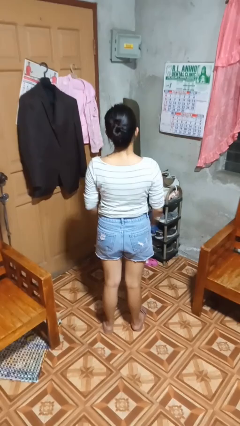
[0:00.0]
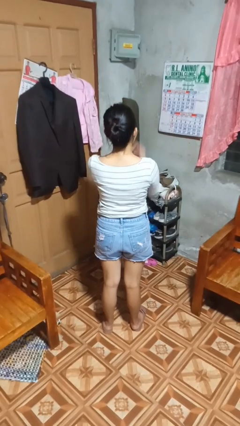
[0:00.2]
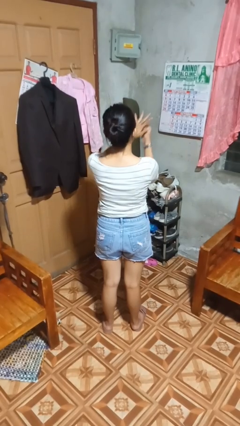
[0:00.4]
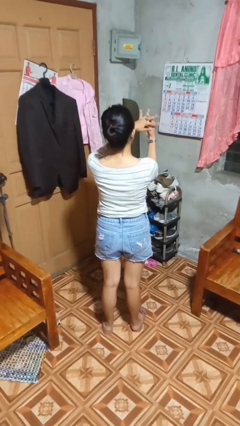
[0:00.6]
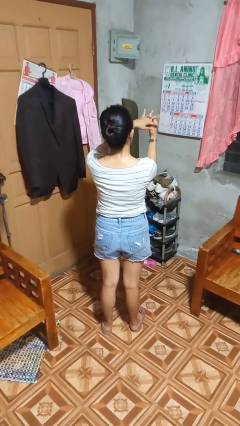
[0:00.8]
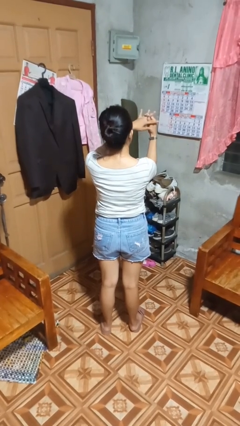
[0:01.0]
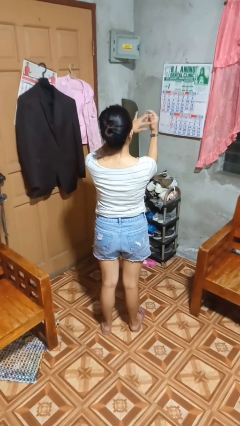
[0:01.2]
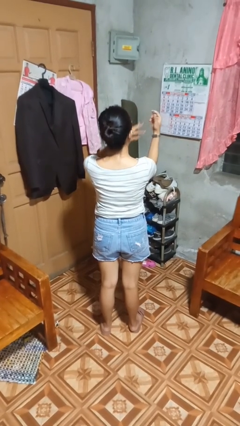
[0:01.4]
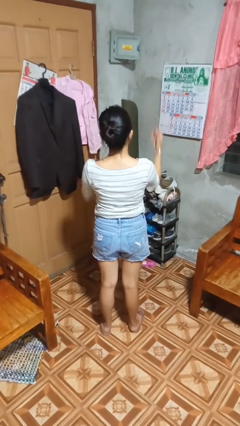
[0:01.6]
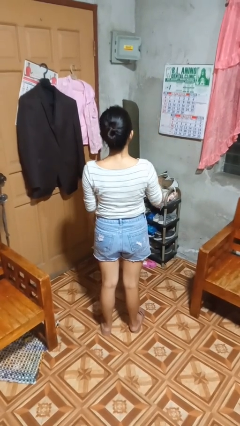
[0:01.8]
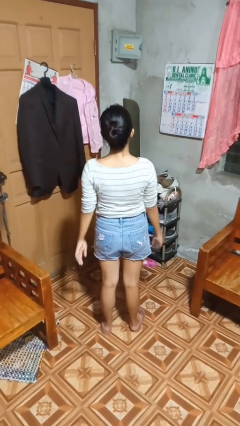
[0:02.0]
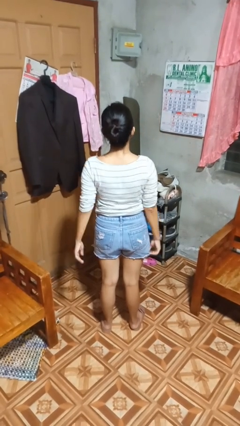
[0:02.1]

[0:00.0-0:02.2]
person takes off ring

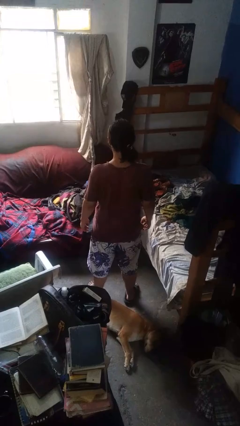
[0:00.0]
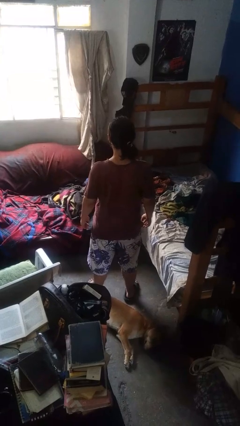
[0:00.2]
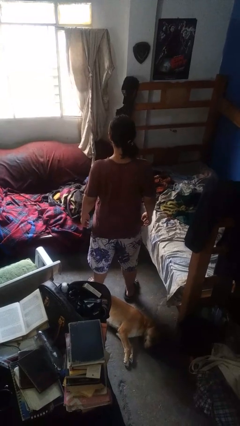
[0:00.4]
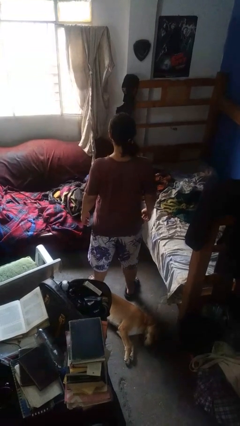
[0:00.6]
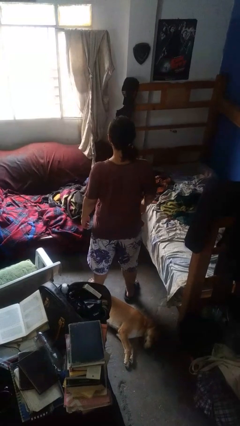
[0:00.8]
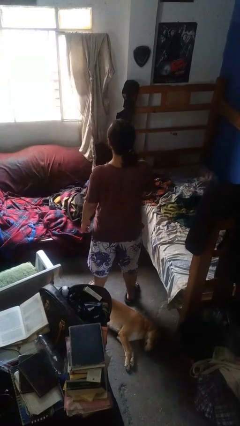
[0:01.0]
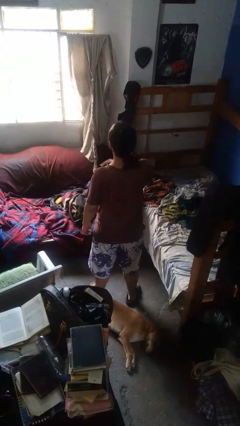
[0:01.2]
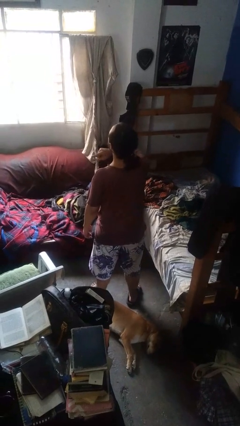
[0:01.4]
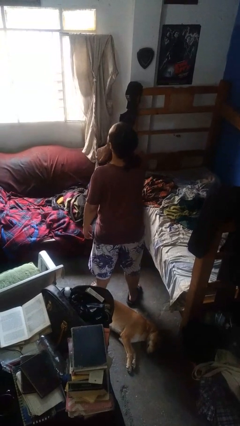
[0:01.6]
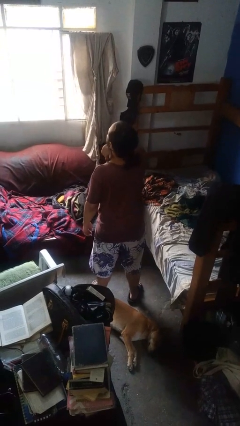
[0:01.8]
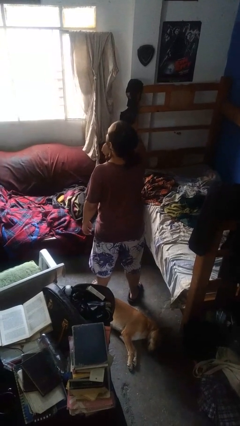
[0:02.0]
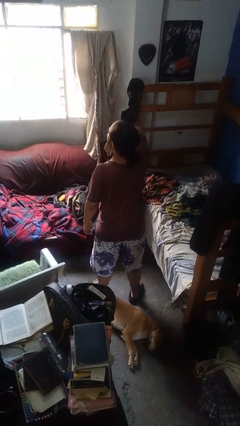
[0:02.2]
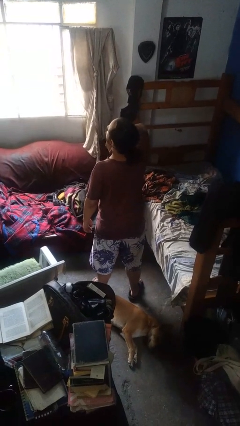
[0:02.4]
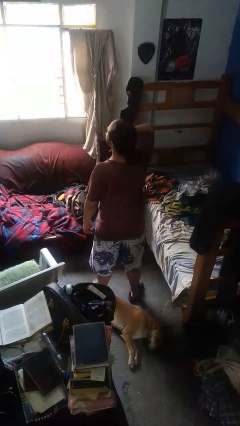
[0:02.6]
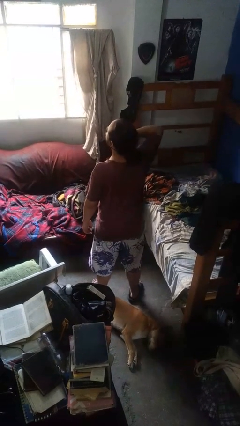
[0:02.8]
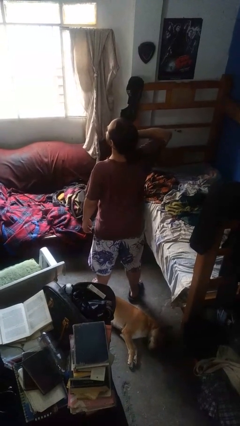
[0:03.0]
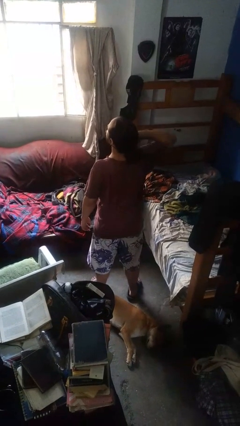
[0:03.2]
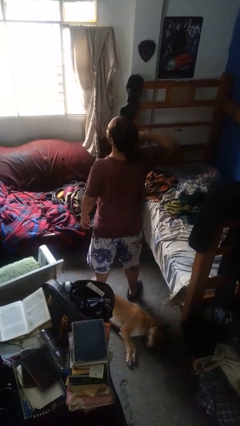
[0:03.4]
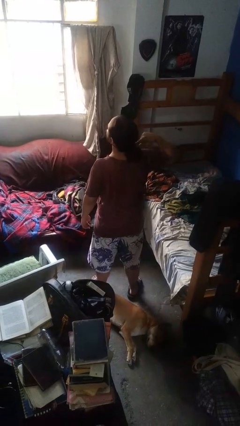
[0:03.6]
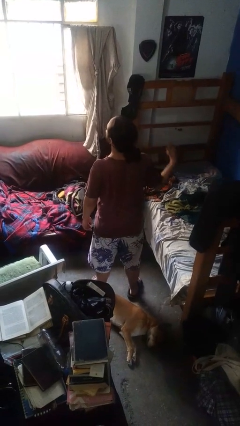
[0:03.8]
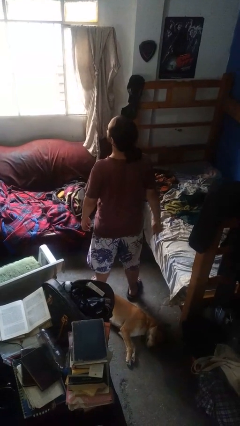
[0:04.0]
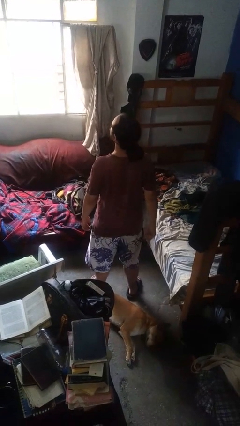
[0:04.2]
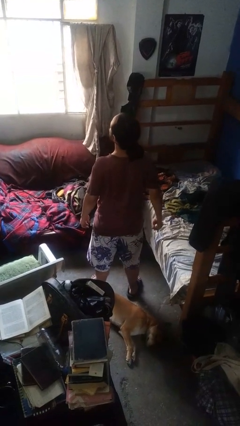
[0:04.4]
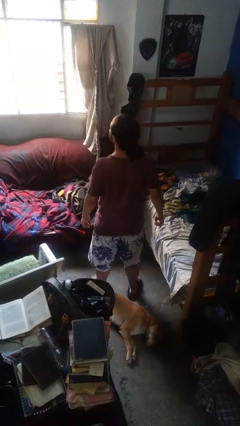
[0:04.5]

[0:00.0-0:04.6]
person gestures watch closely

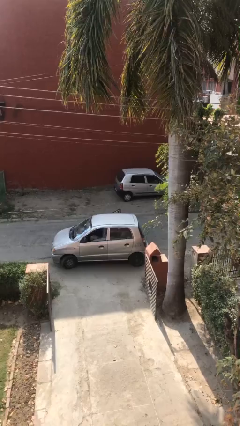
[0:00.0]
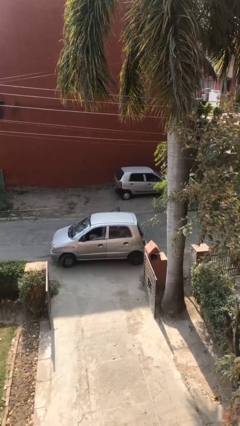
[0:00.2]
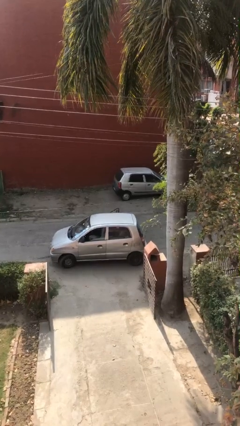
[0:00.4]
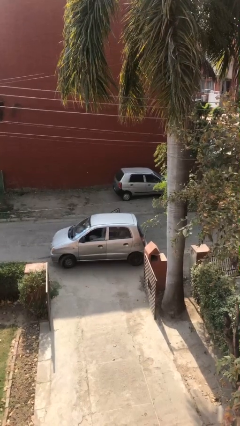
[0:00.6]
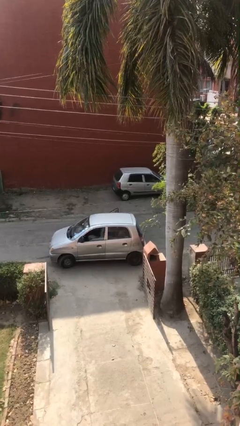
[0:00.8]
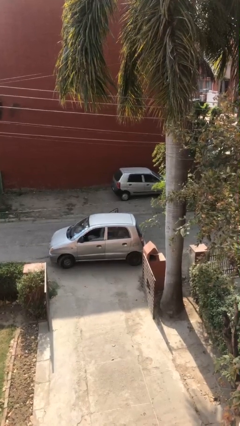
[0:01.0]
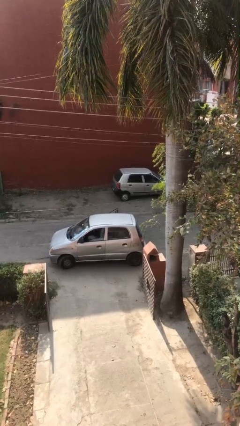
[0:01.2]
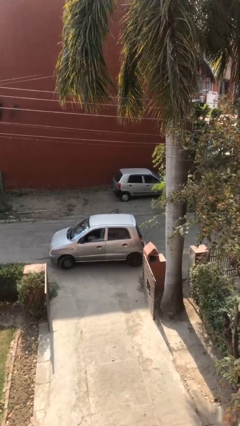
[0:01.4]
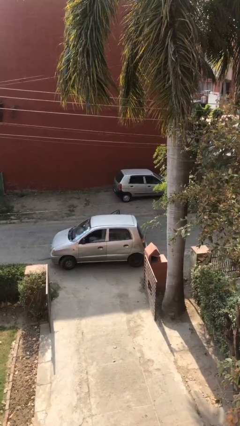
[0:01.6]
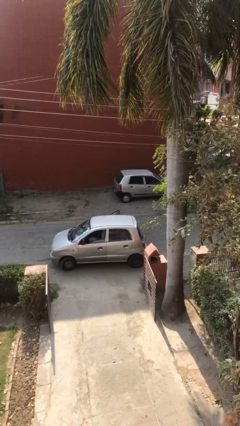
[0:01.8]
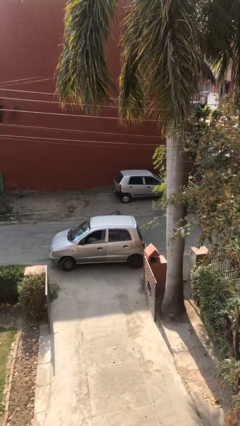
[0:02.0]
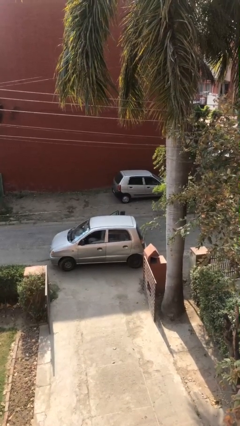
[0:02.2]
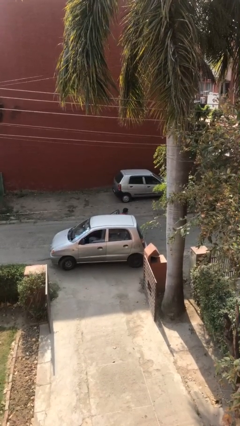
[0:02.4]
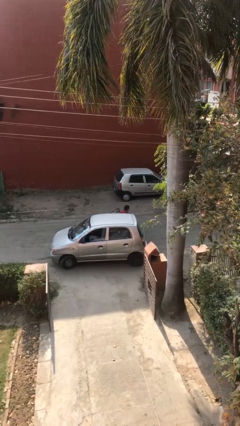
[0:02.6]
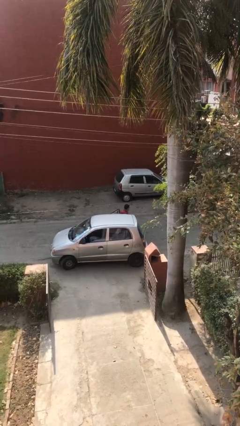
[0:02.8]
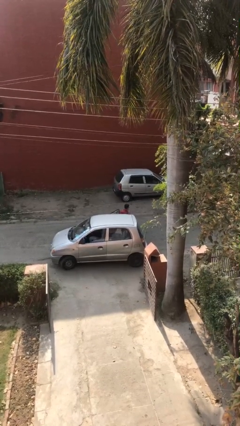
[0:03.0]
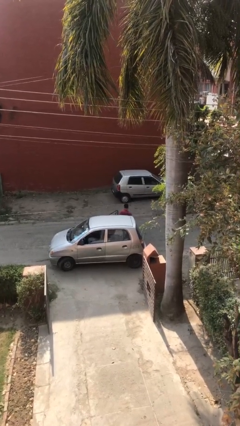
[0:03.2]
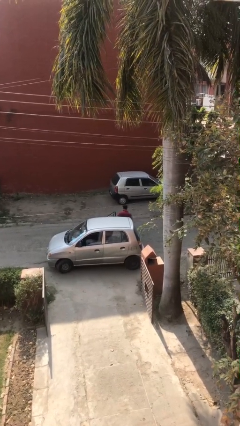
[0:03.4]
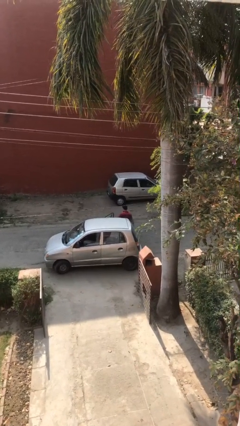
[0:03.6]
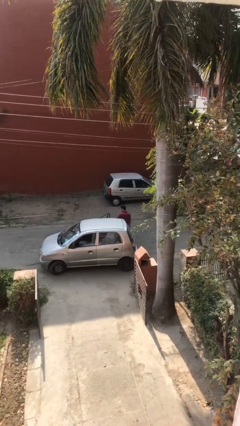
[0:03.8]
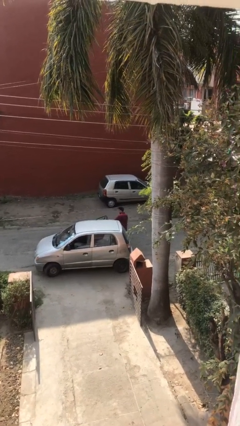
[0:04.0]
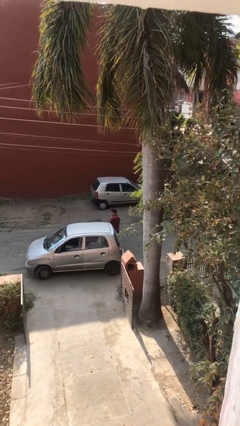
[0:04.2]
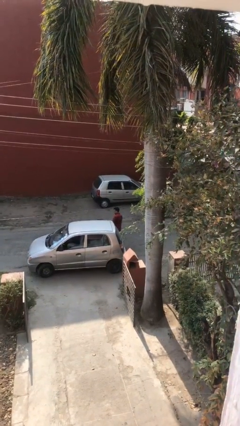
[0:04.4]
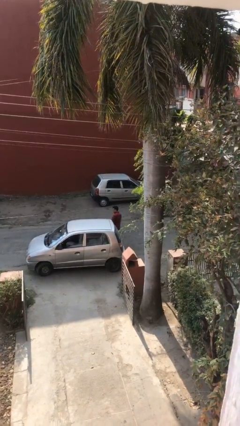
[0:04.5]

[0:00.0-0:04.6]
person exits car

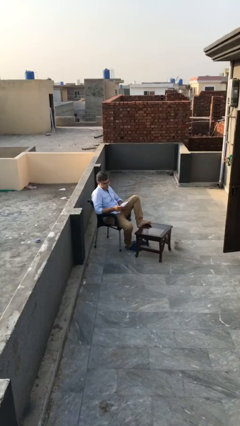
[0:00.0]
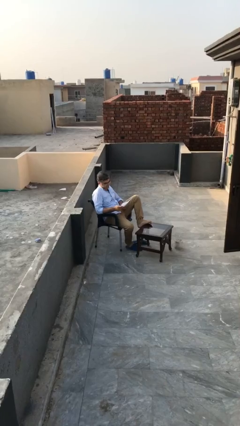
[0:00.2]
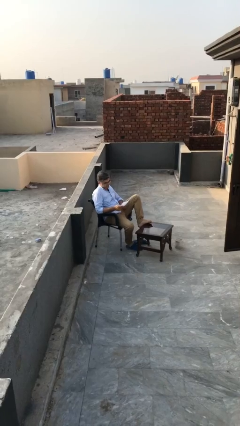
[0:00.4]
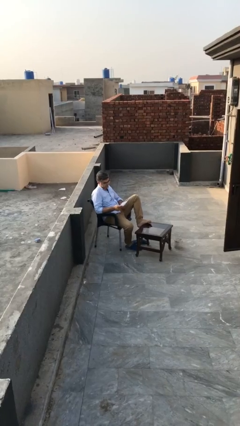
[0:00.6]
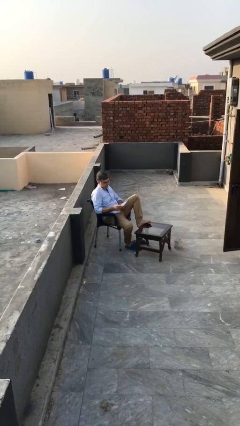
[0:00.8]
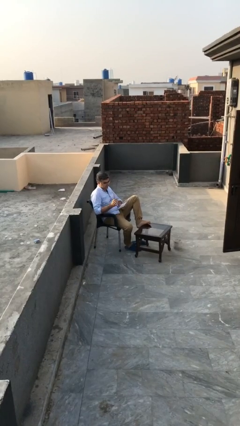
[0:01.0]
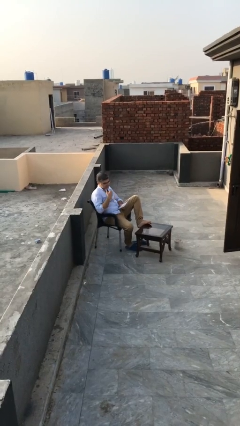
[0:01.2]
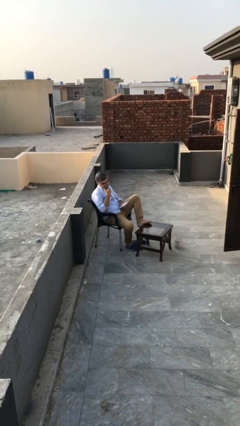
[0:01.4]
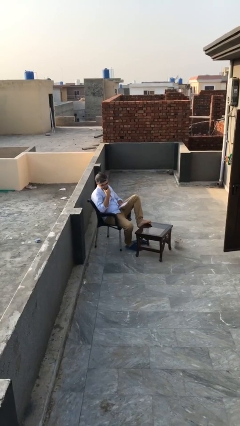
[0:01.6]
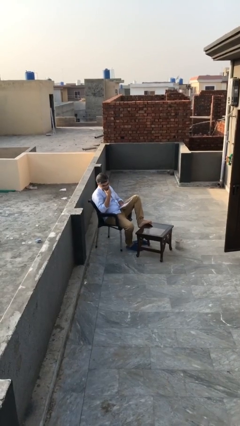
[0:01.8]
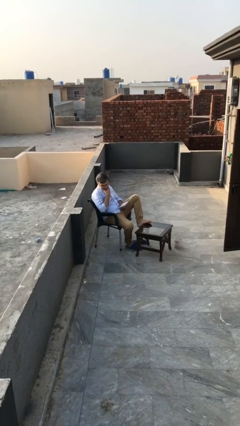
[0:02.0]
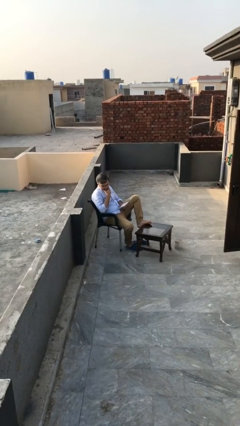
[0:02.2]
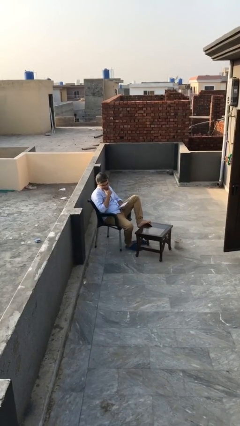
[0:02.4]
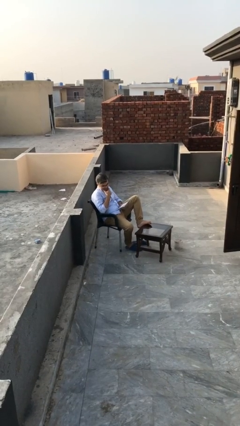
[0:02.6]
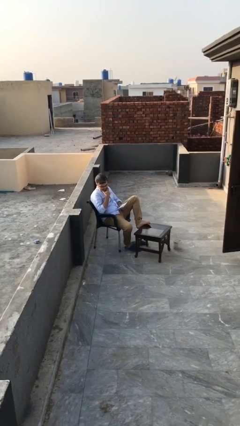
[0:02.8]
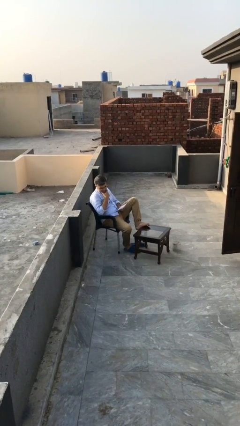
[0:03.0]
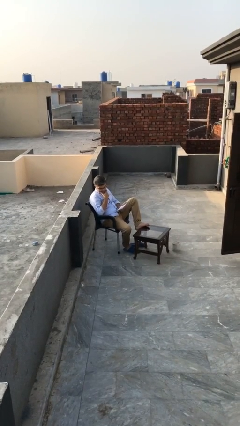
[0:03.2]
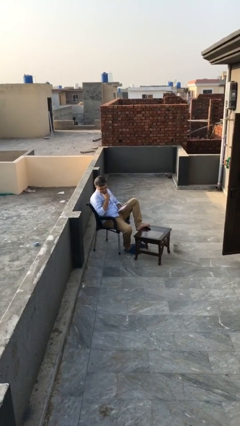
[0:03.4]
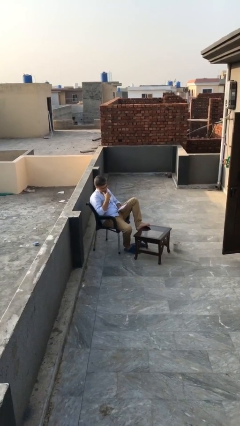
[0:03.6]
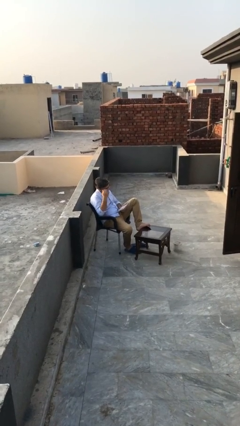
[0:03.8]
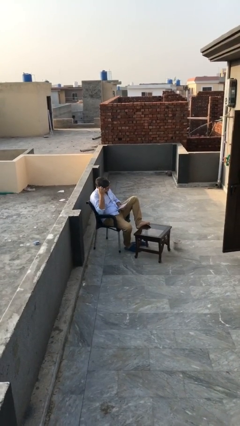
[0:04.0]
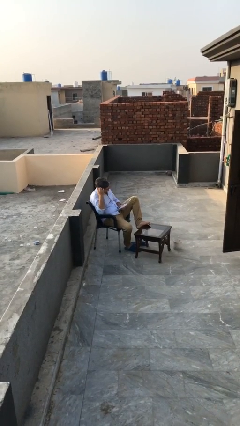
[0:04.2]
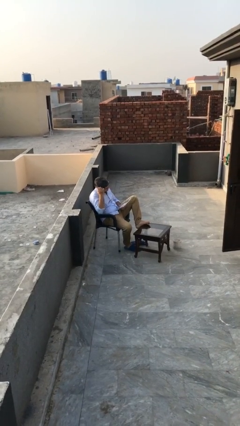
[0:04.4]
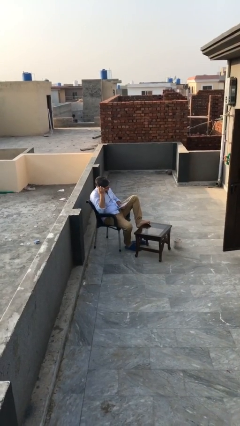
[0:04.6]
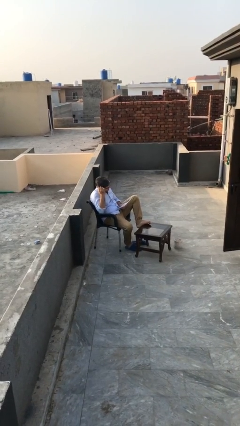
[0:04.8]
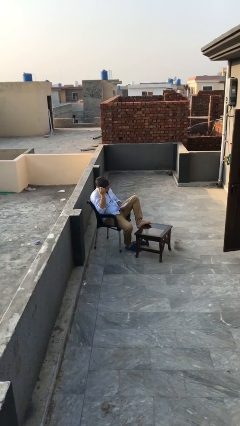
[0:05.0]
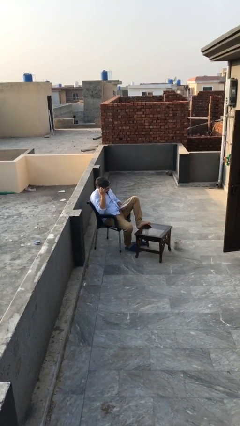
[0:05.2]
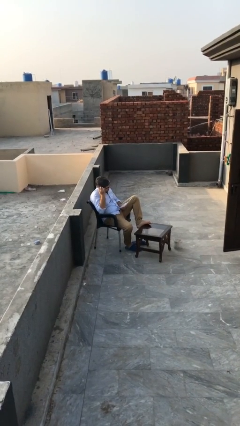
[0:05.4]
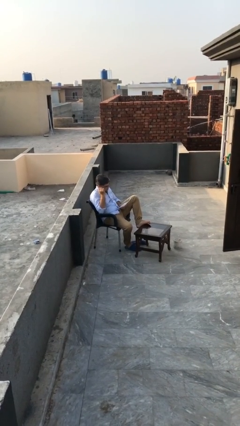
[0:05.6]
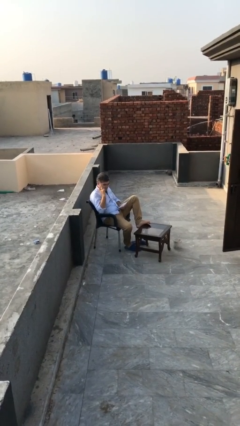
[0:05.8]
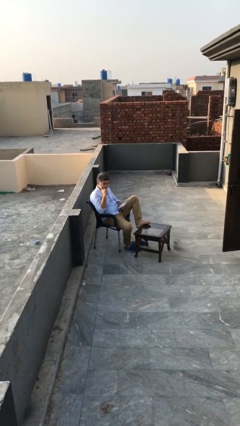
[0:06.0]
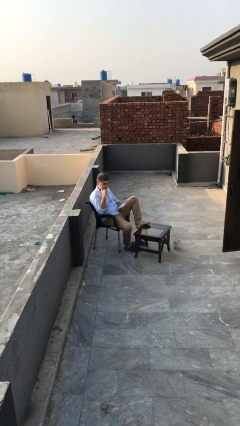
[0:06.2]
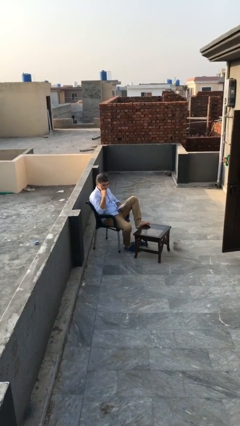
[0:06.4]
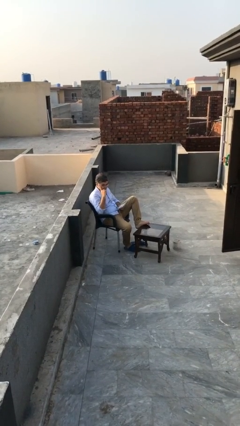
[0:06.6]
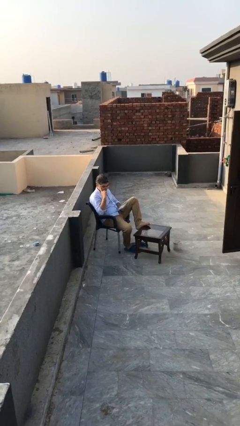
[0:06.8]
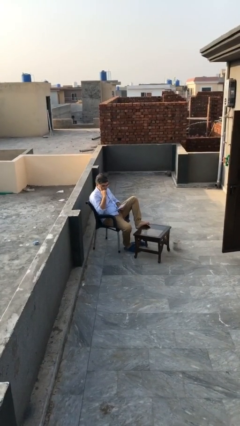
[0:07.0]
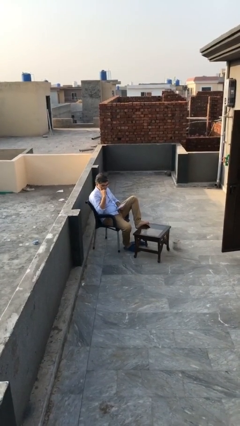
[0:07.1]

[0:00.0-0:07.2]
person reads document
